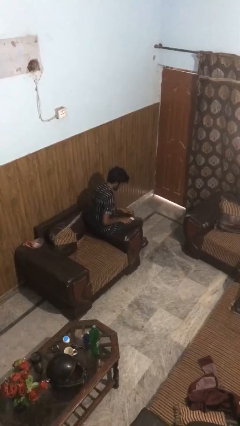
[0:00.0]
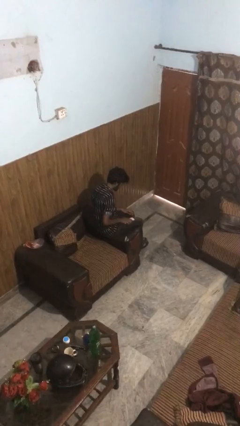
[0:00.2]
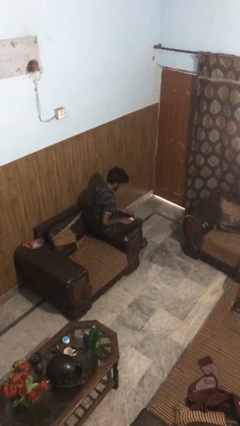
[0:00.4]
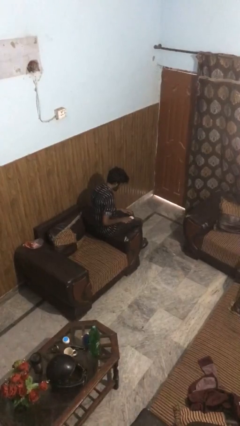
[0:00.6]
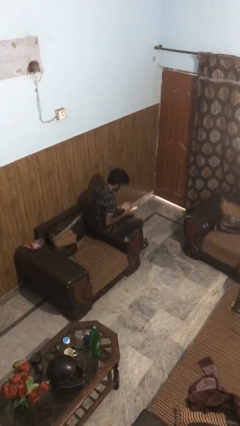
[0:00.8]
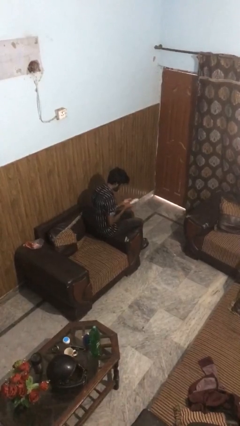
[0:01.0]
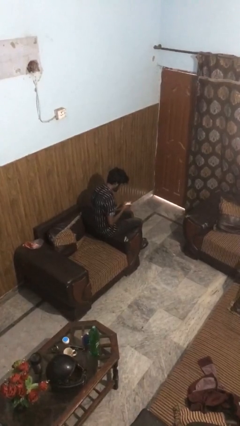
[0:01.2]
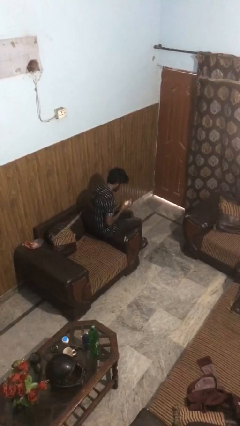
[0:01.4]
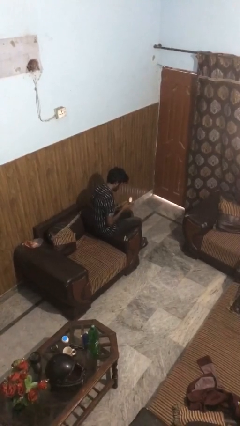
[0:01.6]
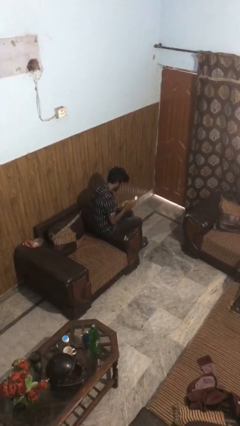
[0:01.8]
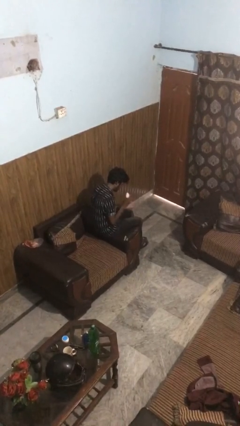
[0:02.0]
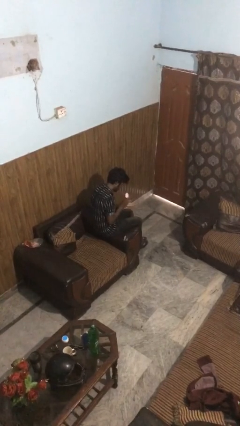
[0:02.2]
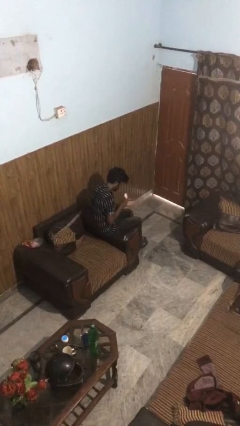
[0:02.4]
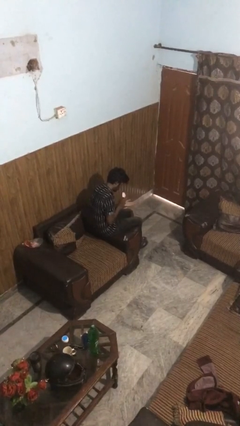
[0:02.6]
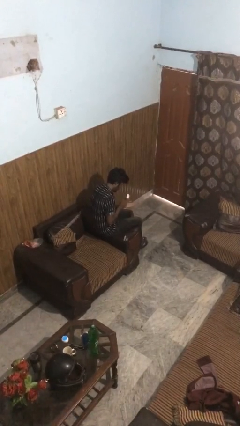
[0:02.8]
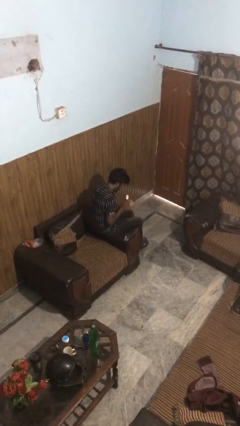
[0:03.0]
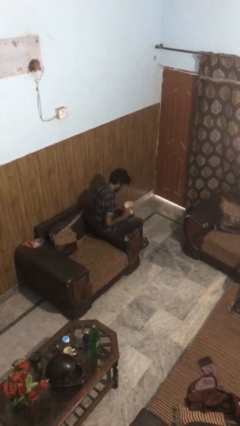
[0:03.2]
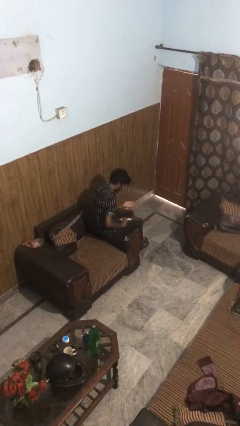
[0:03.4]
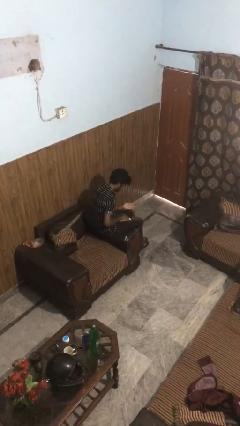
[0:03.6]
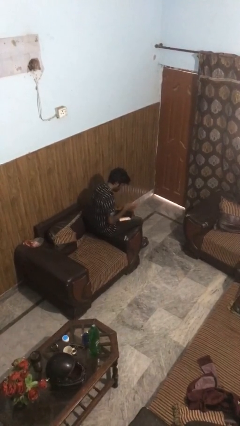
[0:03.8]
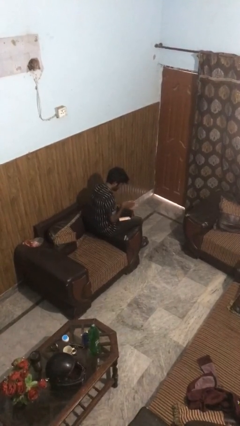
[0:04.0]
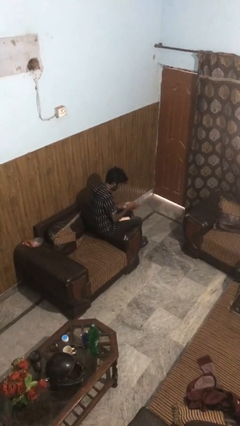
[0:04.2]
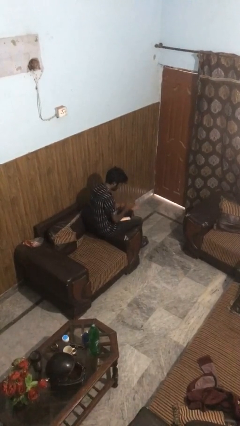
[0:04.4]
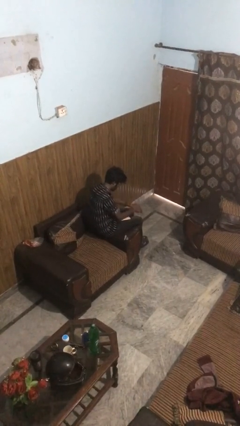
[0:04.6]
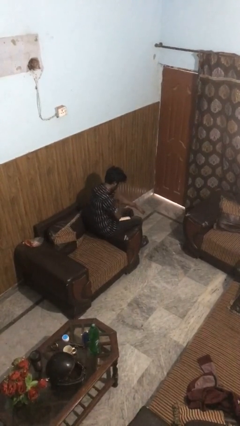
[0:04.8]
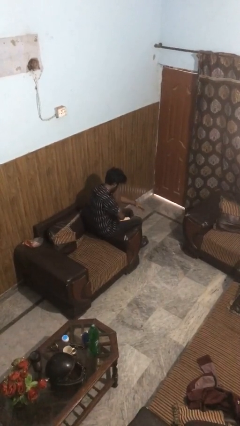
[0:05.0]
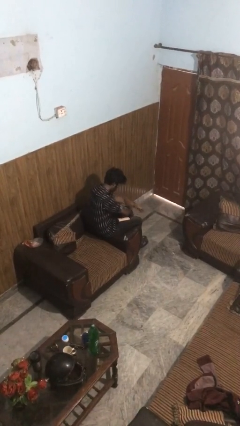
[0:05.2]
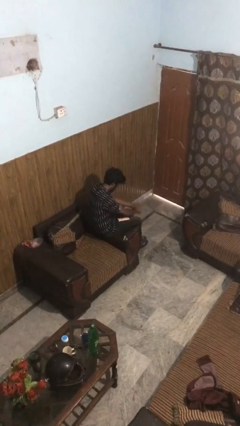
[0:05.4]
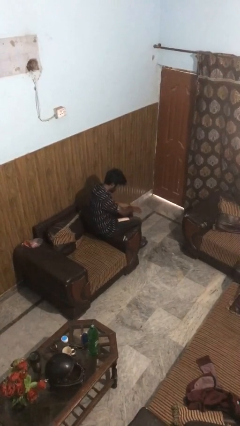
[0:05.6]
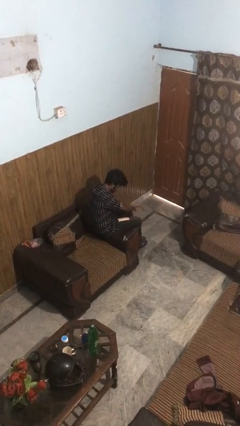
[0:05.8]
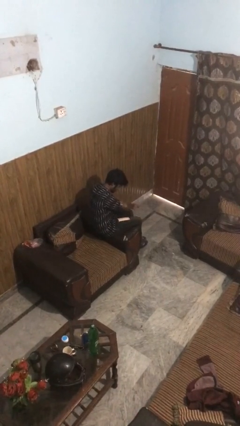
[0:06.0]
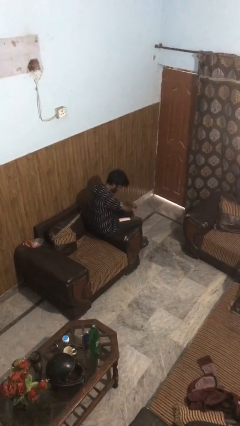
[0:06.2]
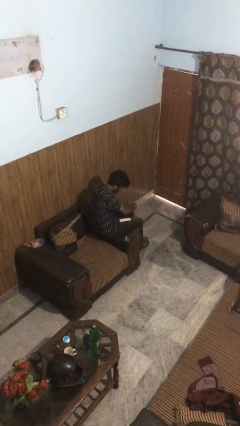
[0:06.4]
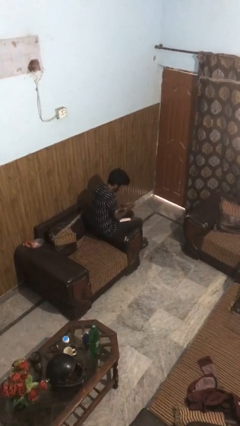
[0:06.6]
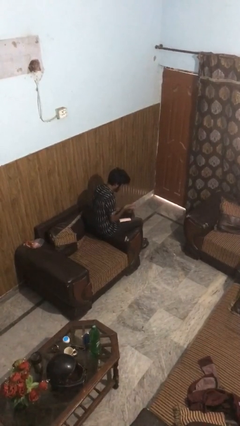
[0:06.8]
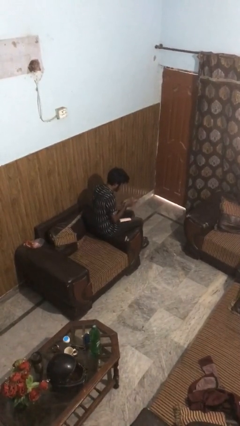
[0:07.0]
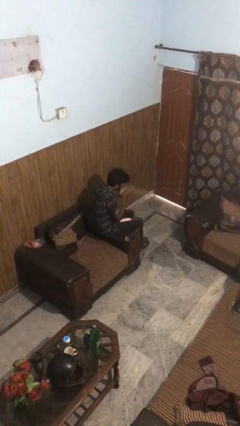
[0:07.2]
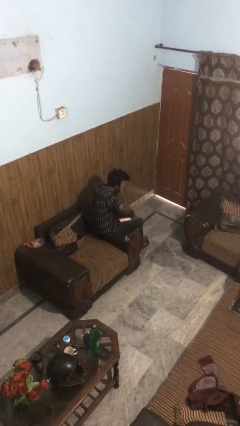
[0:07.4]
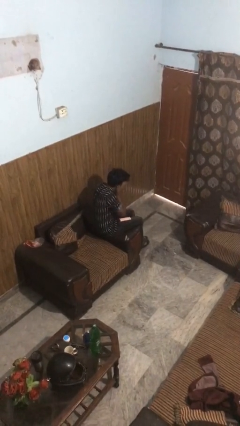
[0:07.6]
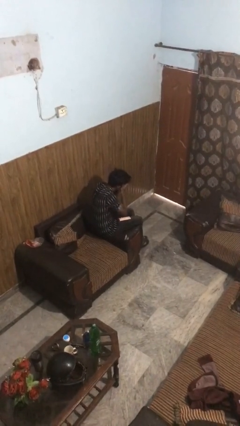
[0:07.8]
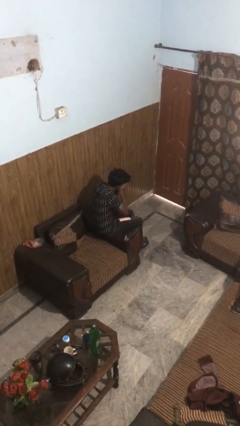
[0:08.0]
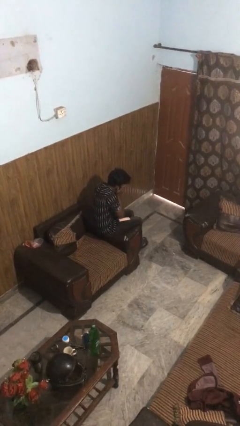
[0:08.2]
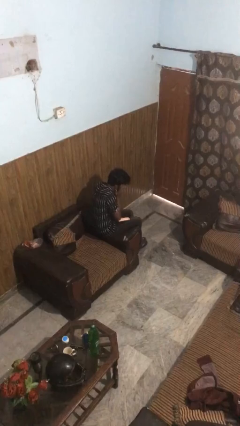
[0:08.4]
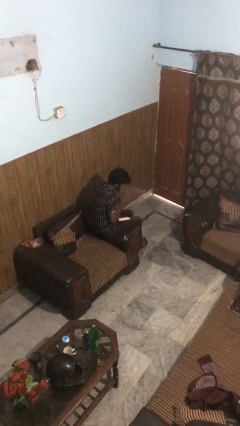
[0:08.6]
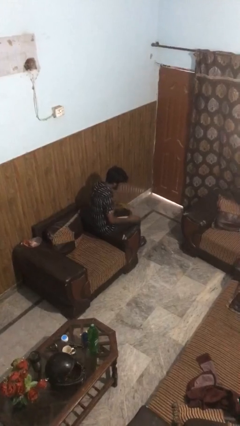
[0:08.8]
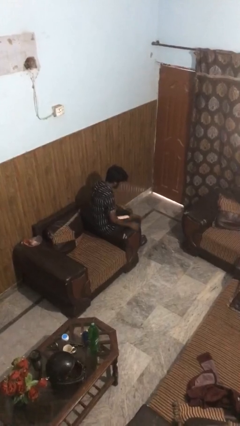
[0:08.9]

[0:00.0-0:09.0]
person applies sunscreen

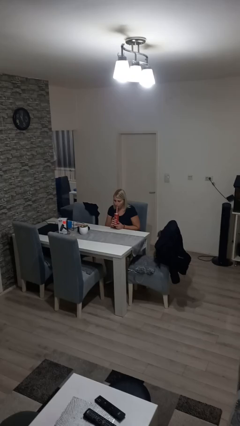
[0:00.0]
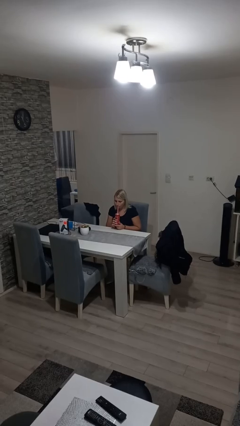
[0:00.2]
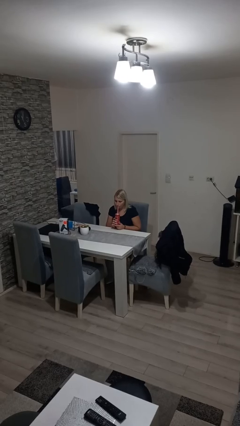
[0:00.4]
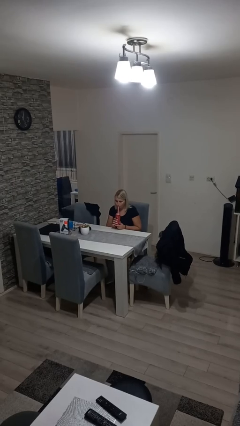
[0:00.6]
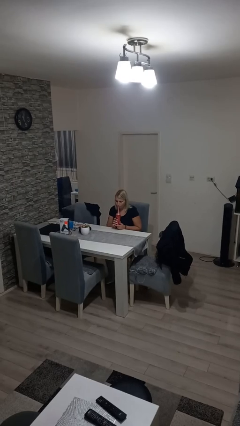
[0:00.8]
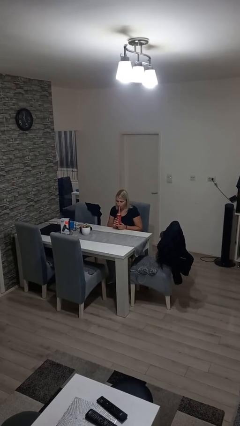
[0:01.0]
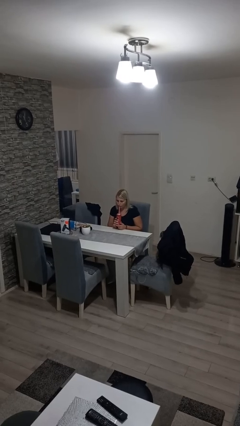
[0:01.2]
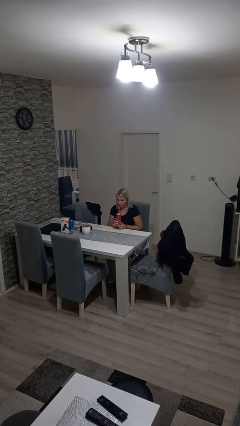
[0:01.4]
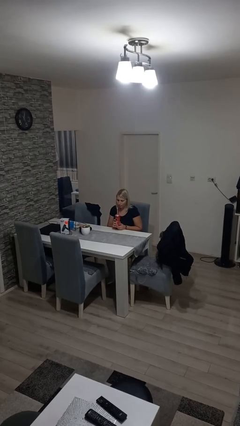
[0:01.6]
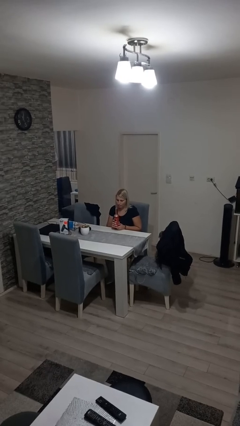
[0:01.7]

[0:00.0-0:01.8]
person drinks from straw

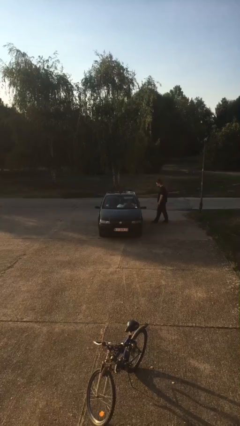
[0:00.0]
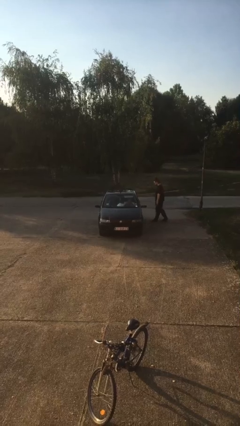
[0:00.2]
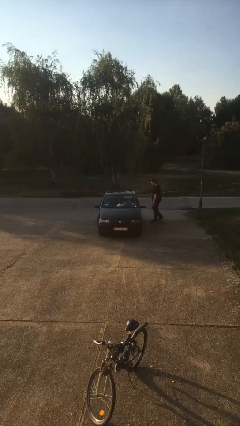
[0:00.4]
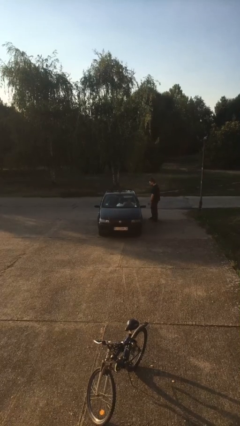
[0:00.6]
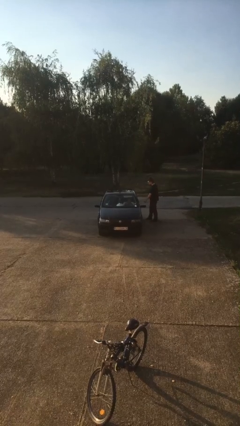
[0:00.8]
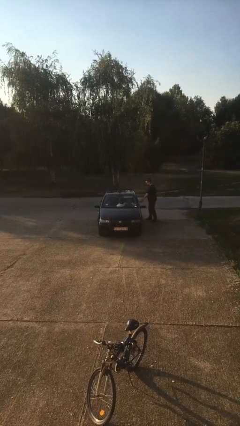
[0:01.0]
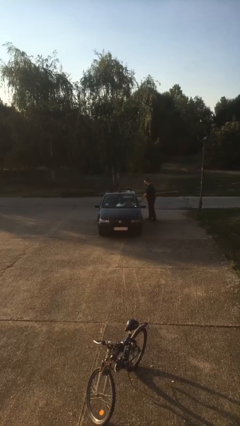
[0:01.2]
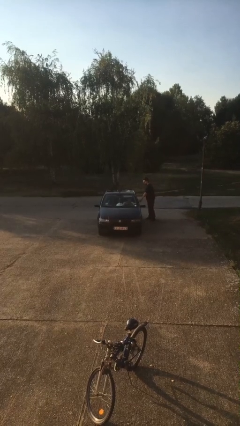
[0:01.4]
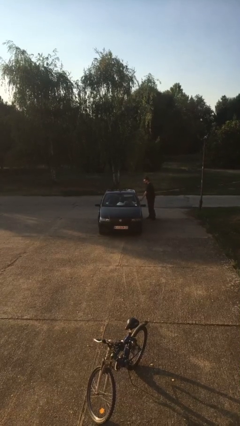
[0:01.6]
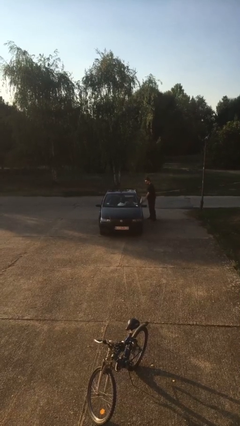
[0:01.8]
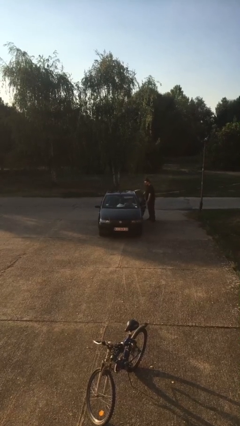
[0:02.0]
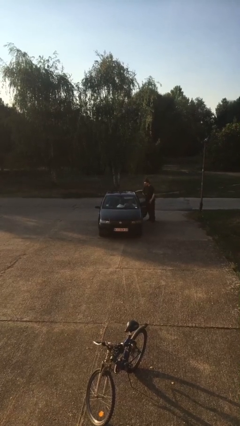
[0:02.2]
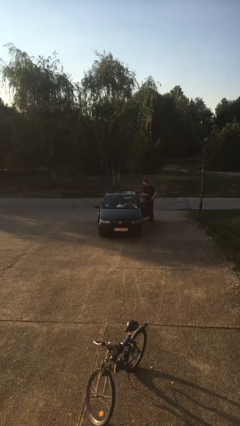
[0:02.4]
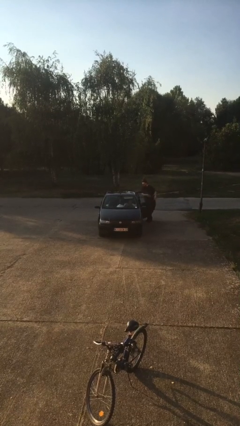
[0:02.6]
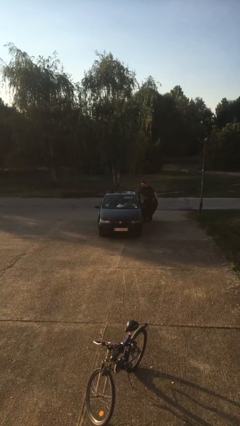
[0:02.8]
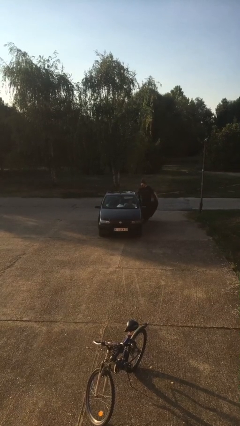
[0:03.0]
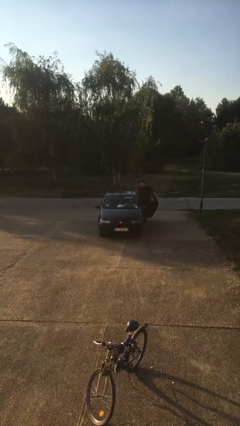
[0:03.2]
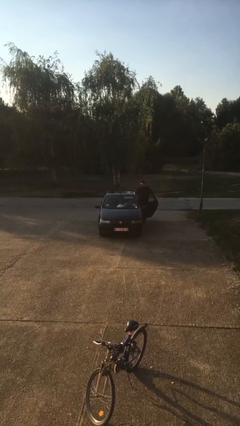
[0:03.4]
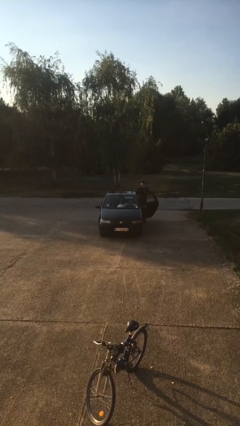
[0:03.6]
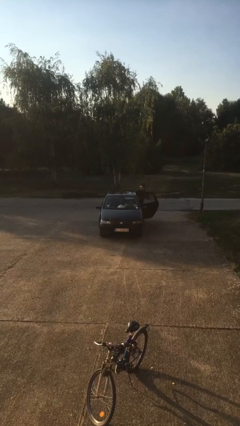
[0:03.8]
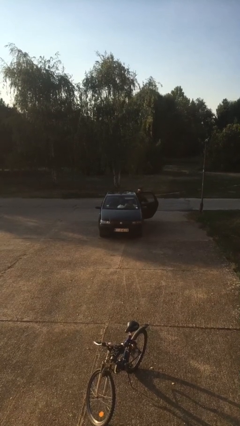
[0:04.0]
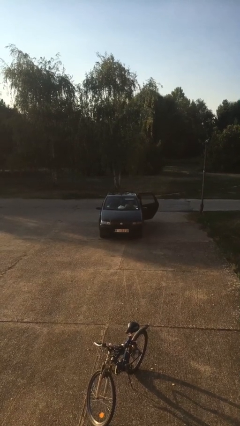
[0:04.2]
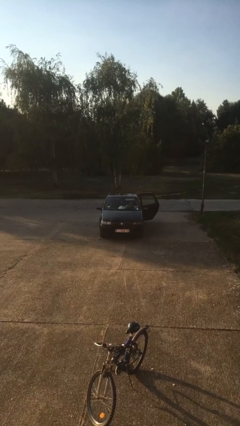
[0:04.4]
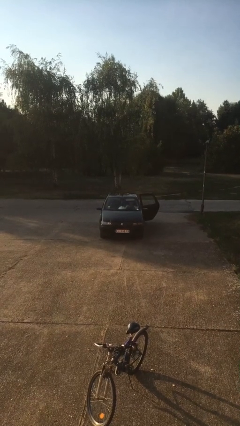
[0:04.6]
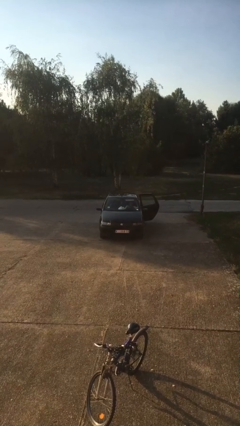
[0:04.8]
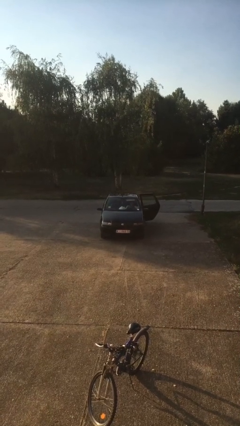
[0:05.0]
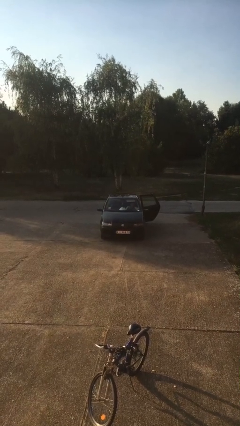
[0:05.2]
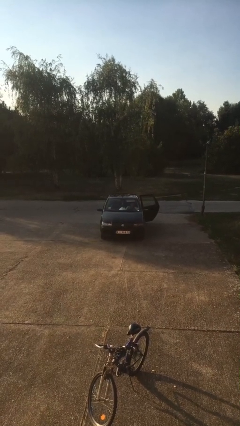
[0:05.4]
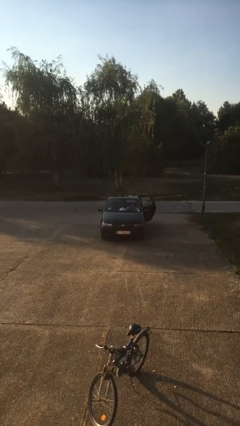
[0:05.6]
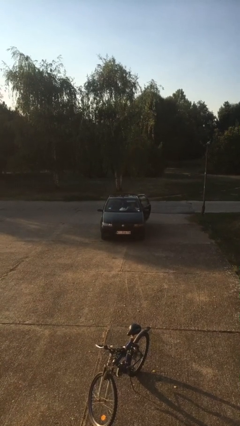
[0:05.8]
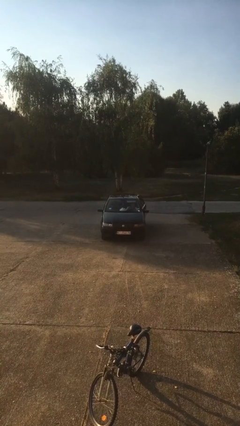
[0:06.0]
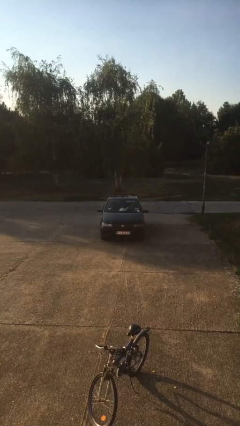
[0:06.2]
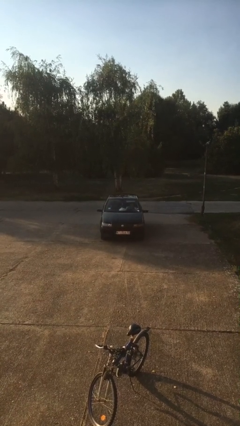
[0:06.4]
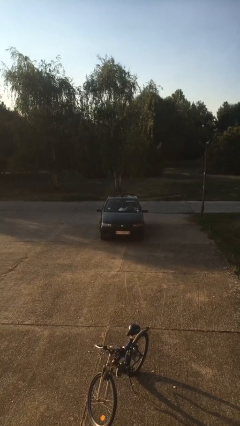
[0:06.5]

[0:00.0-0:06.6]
car picks up person

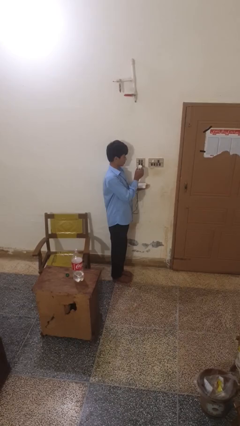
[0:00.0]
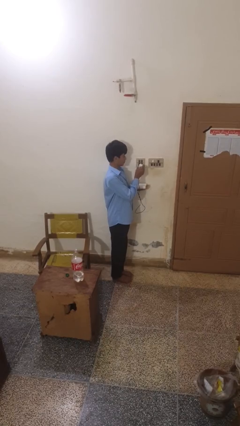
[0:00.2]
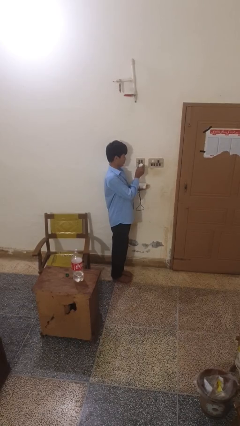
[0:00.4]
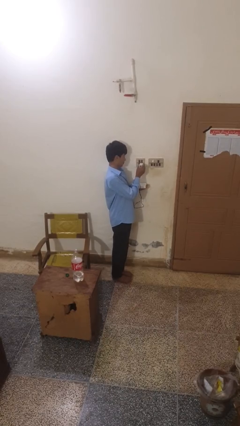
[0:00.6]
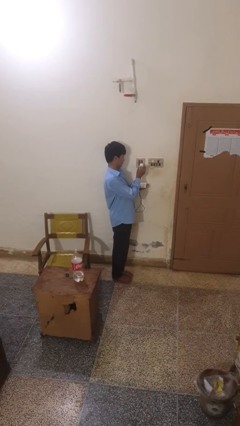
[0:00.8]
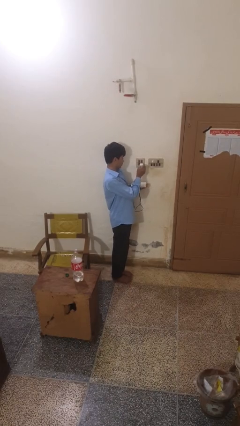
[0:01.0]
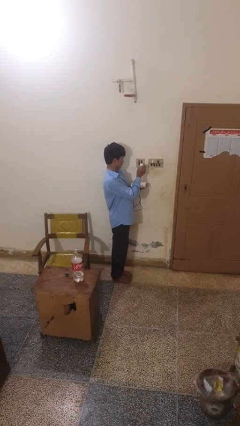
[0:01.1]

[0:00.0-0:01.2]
person plugs into electrical socket
